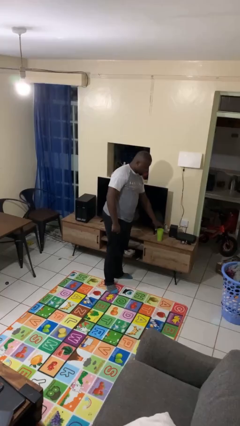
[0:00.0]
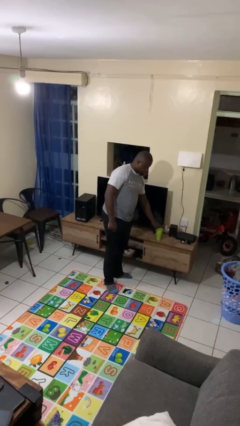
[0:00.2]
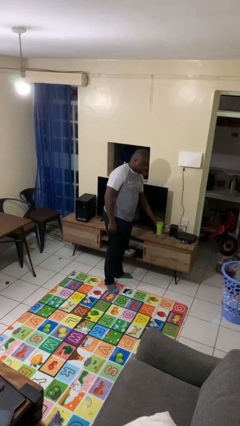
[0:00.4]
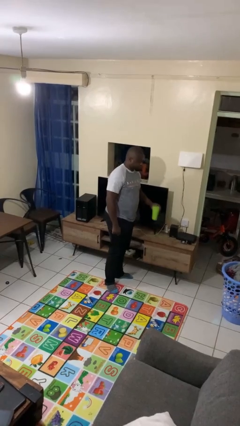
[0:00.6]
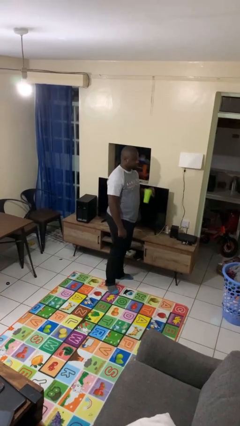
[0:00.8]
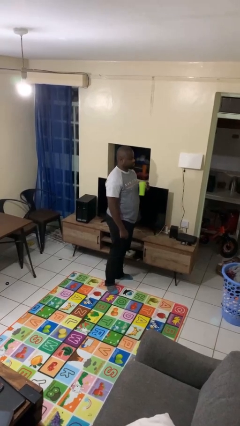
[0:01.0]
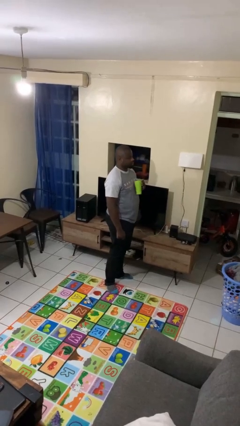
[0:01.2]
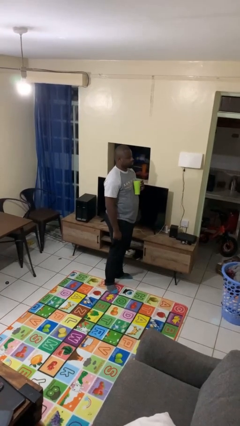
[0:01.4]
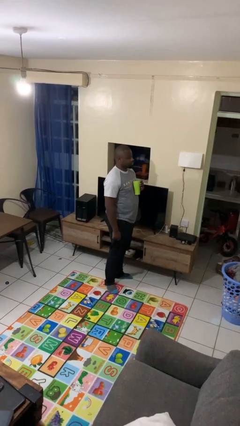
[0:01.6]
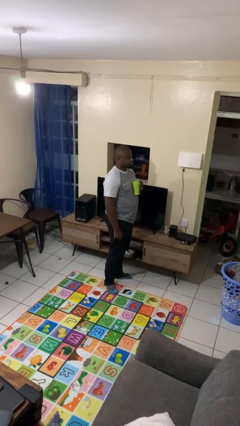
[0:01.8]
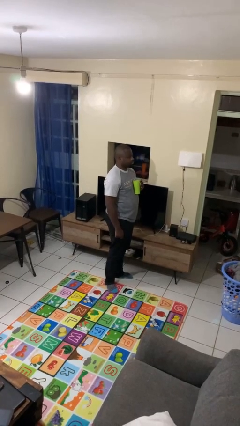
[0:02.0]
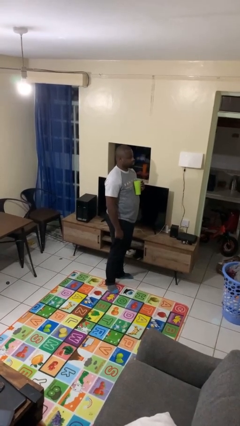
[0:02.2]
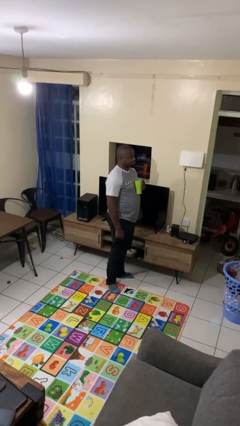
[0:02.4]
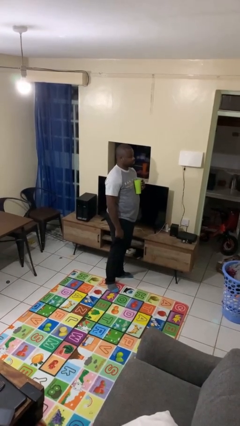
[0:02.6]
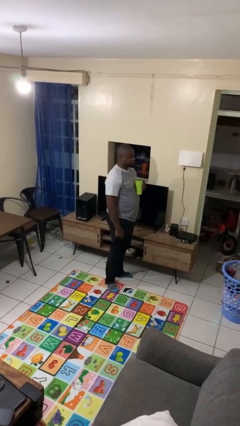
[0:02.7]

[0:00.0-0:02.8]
person picks up object from countertop

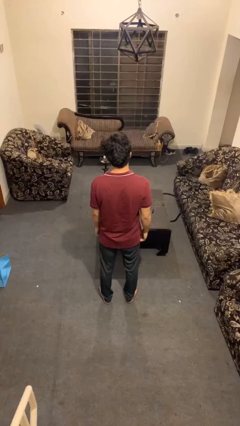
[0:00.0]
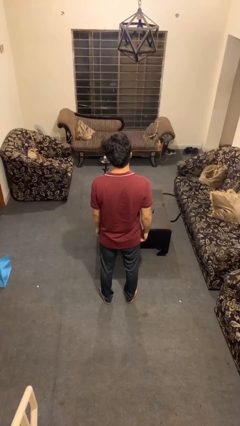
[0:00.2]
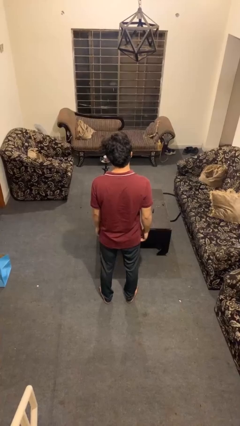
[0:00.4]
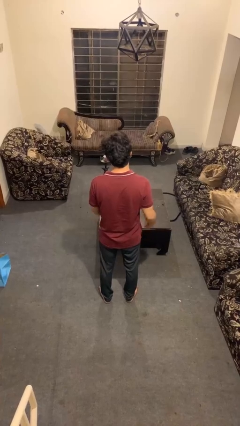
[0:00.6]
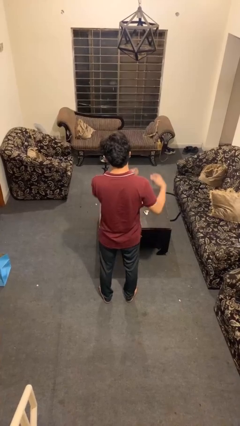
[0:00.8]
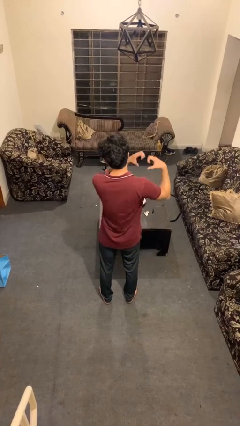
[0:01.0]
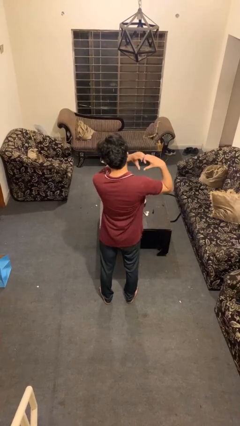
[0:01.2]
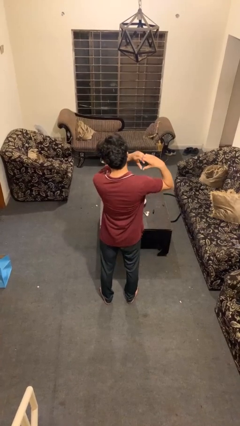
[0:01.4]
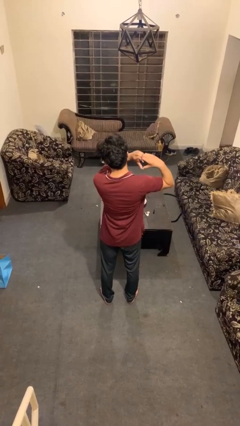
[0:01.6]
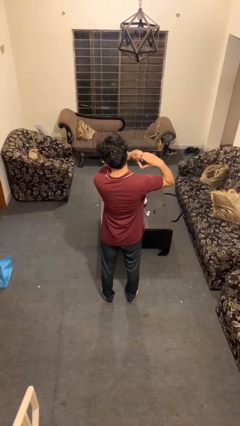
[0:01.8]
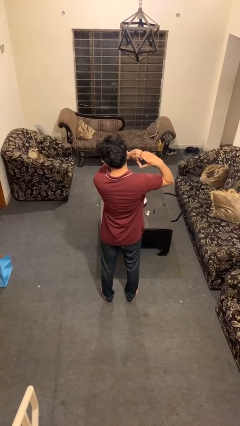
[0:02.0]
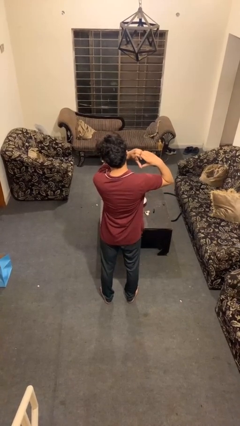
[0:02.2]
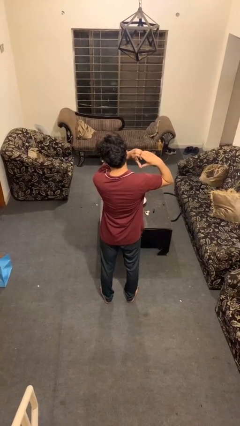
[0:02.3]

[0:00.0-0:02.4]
person gestures heart

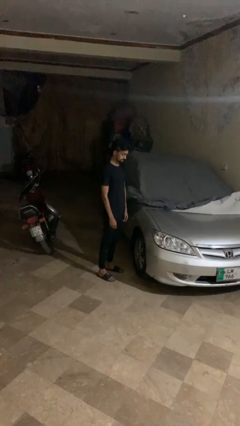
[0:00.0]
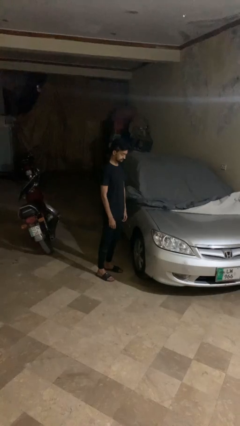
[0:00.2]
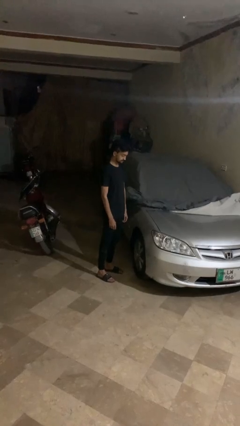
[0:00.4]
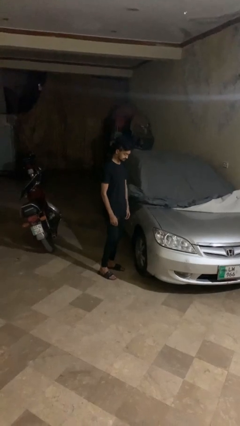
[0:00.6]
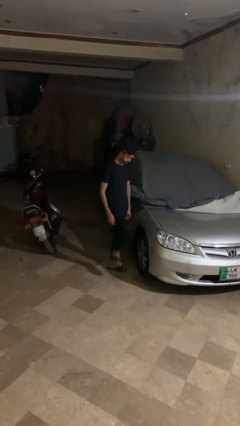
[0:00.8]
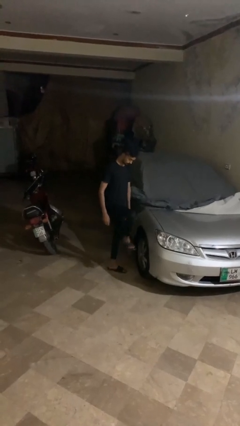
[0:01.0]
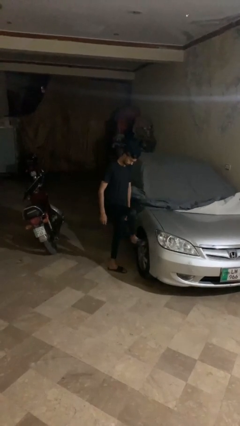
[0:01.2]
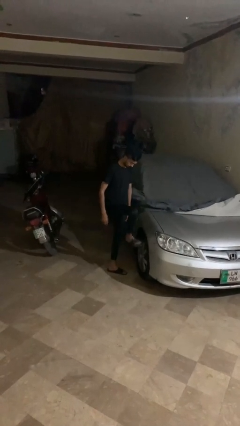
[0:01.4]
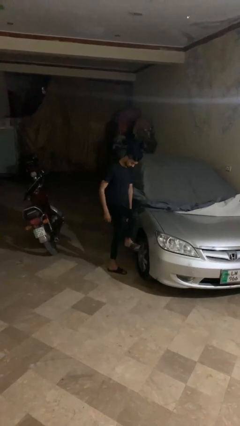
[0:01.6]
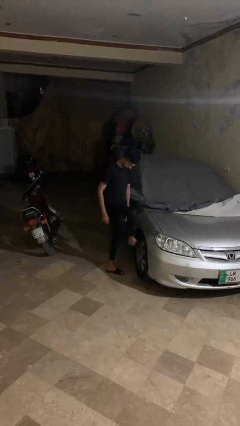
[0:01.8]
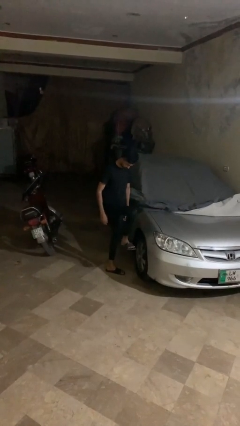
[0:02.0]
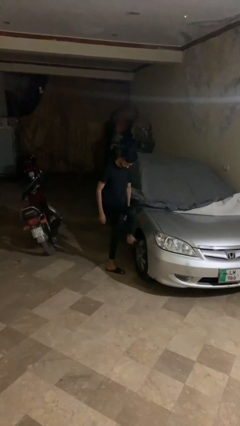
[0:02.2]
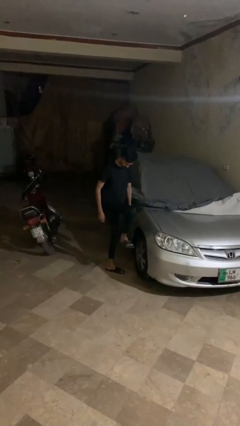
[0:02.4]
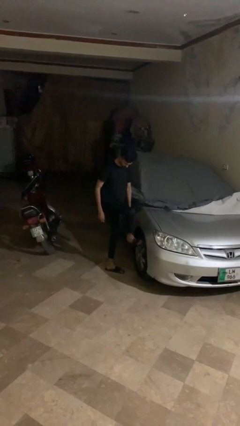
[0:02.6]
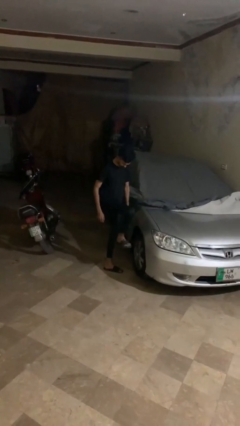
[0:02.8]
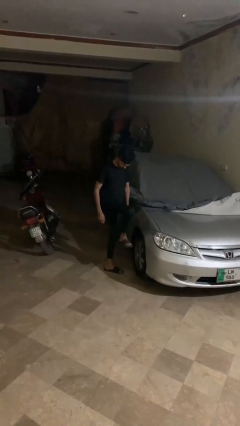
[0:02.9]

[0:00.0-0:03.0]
person kicks car tires

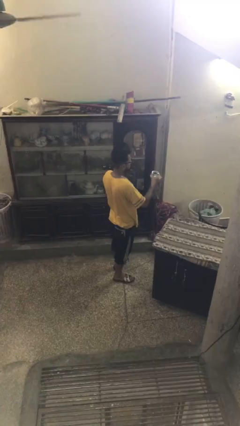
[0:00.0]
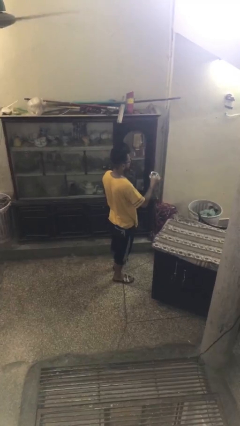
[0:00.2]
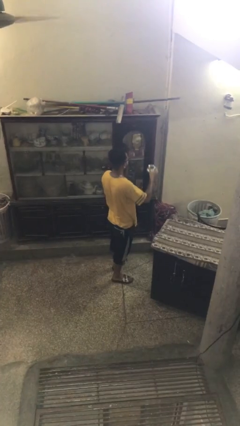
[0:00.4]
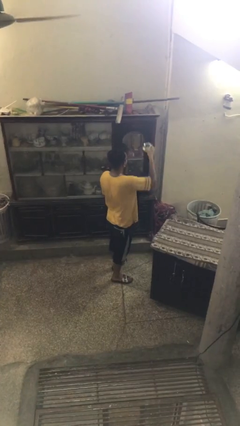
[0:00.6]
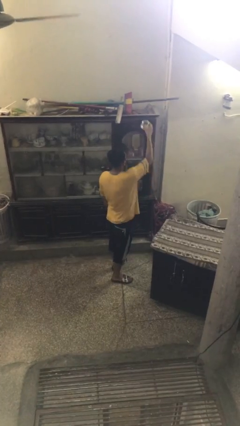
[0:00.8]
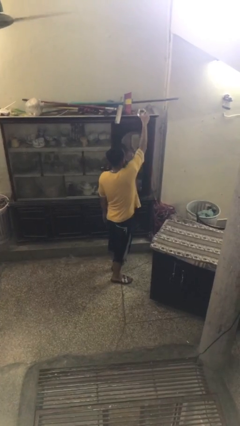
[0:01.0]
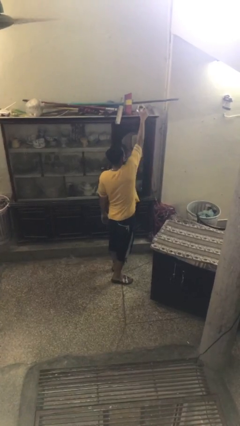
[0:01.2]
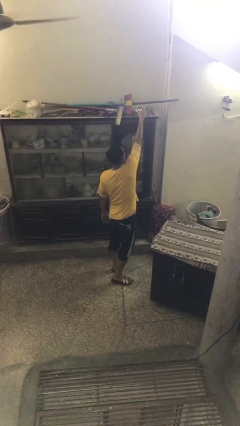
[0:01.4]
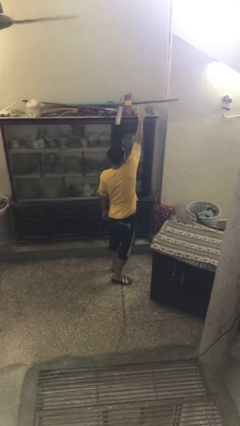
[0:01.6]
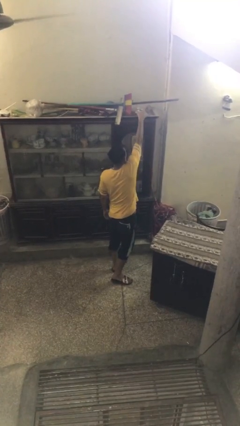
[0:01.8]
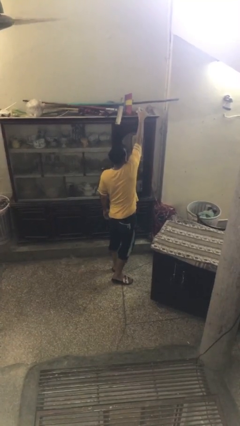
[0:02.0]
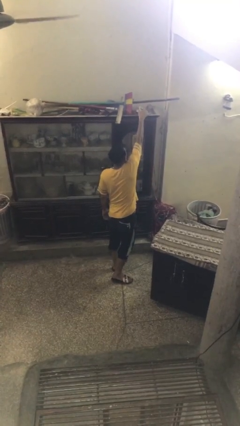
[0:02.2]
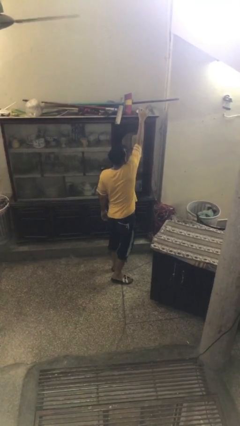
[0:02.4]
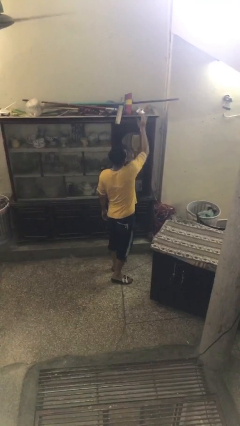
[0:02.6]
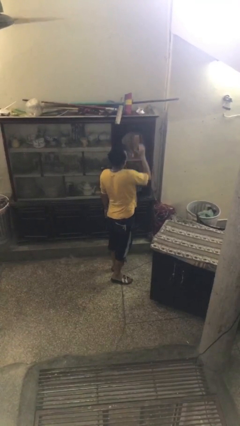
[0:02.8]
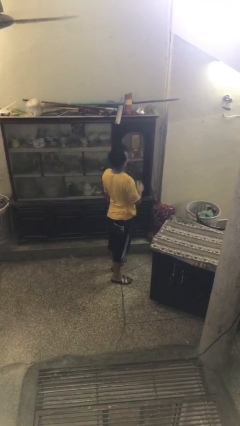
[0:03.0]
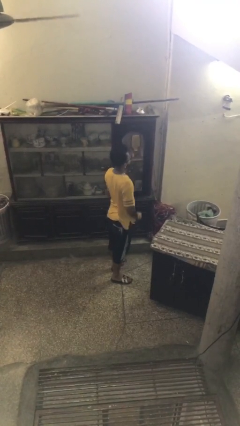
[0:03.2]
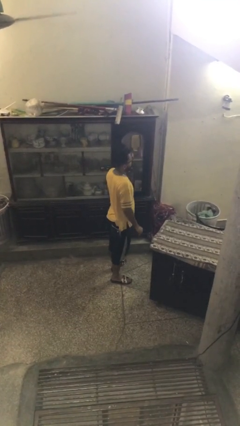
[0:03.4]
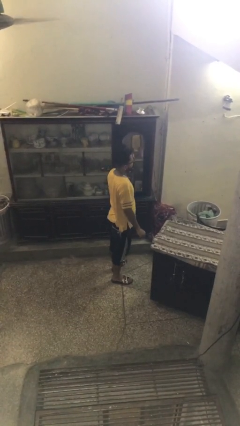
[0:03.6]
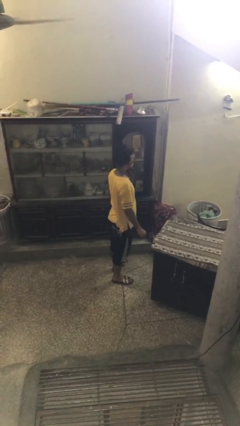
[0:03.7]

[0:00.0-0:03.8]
person puts down object on shelf

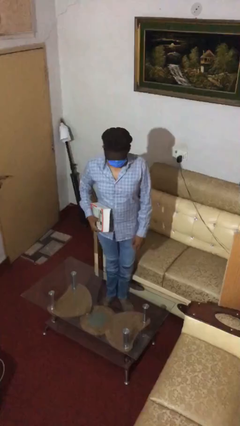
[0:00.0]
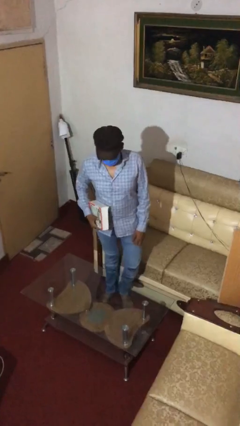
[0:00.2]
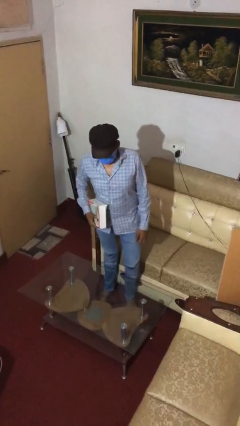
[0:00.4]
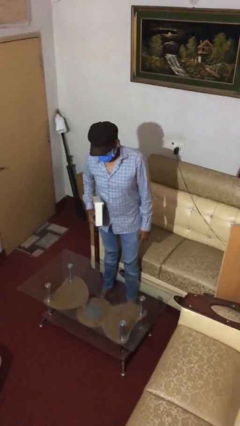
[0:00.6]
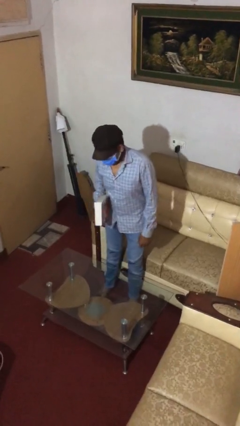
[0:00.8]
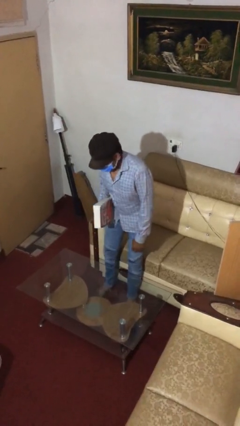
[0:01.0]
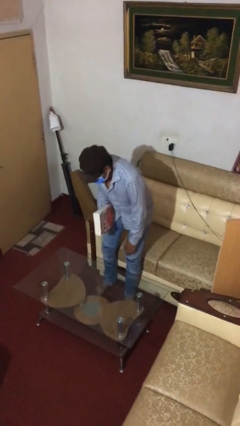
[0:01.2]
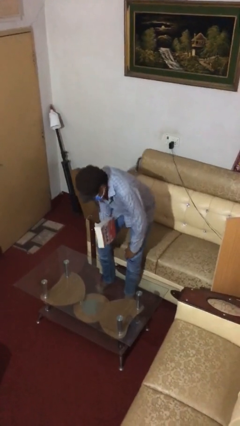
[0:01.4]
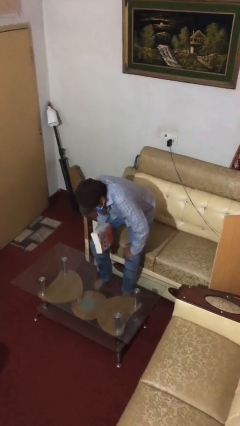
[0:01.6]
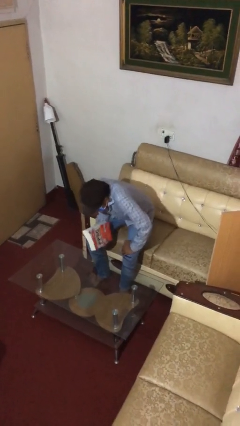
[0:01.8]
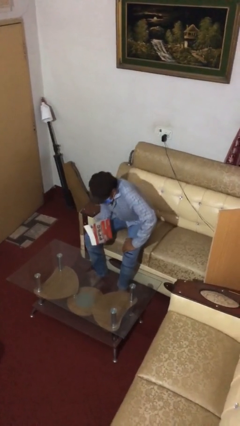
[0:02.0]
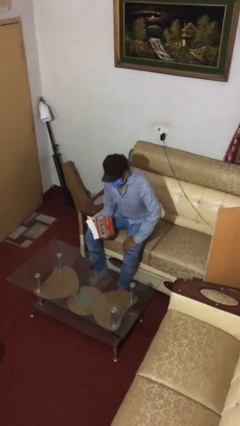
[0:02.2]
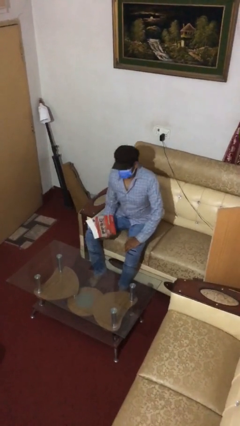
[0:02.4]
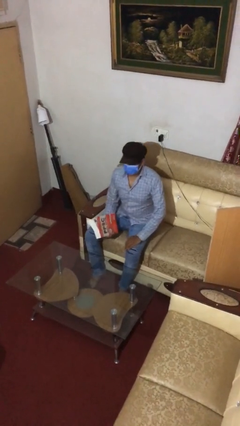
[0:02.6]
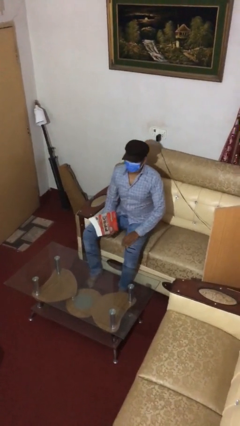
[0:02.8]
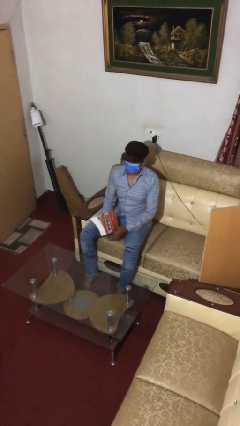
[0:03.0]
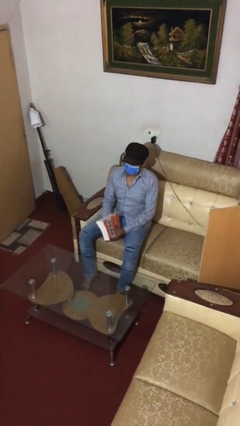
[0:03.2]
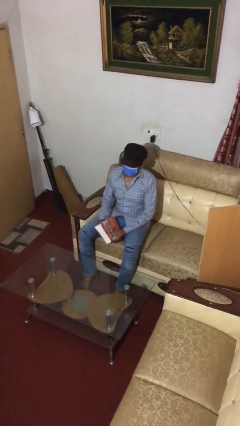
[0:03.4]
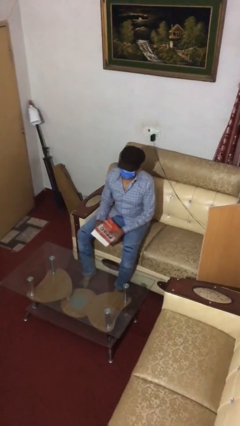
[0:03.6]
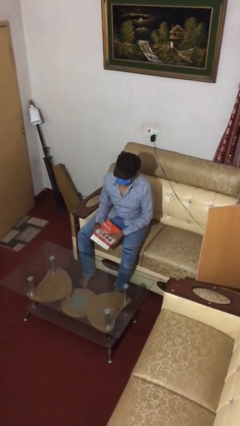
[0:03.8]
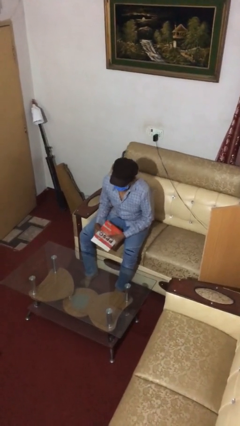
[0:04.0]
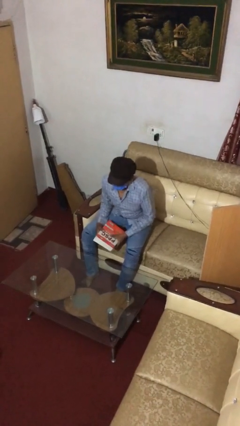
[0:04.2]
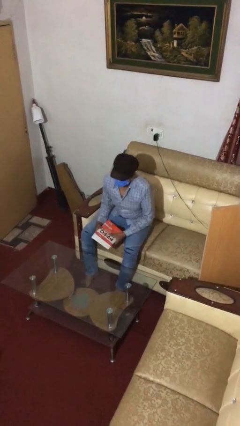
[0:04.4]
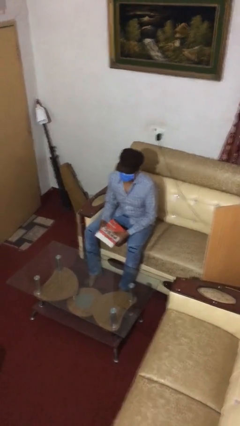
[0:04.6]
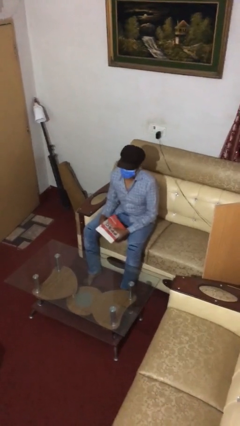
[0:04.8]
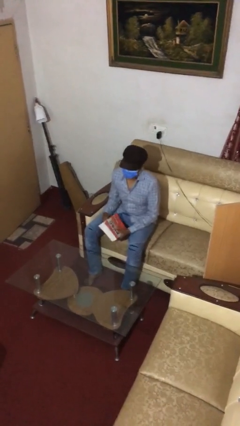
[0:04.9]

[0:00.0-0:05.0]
person sits down

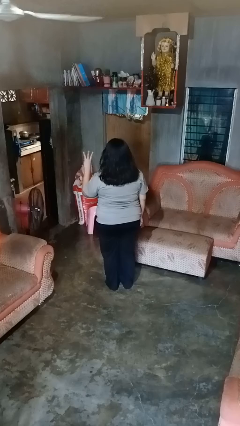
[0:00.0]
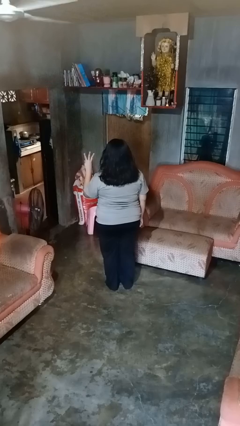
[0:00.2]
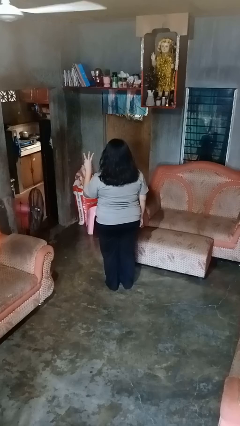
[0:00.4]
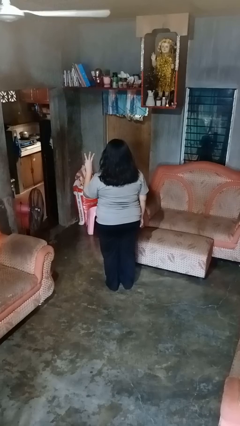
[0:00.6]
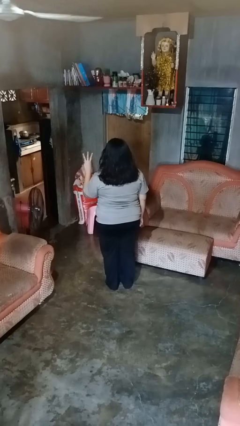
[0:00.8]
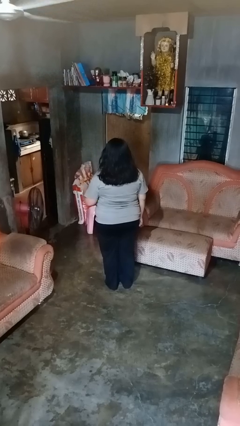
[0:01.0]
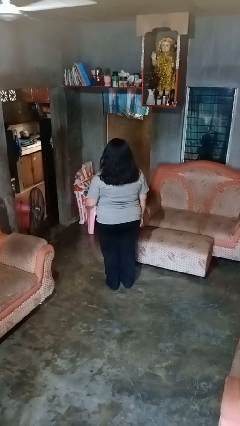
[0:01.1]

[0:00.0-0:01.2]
person gestures number three
